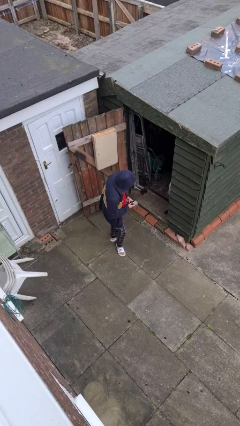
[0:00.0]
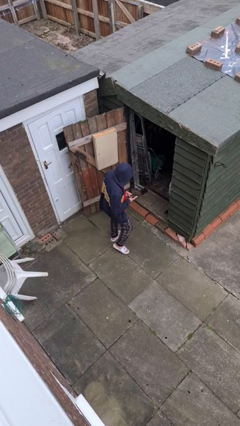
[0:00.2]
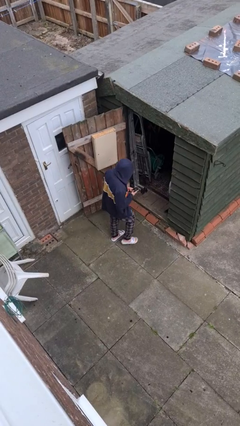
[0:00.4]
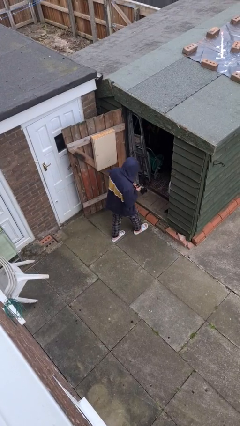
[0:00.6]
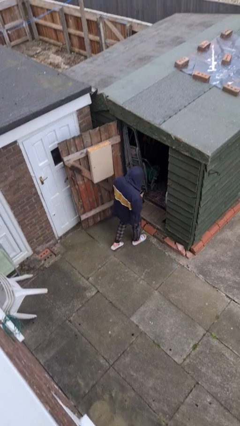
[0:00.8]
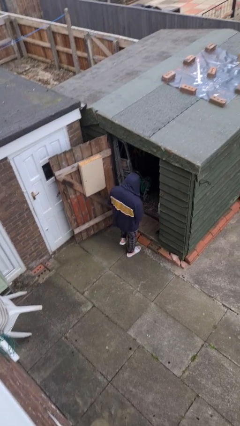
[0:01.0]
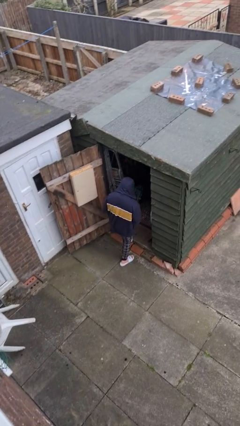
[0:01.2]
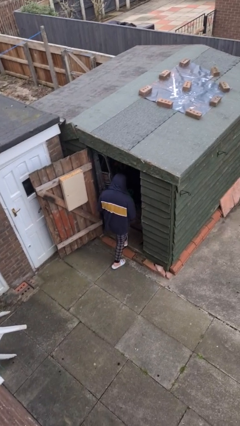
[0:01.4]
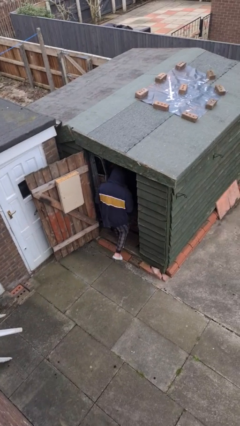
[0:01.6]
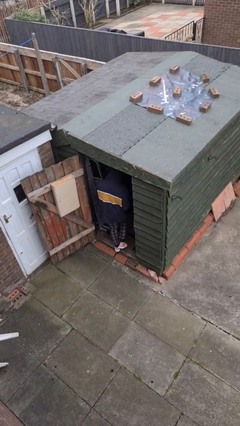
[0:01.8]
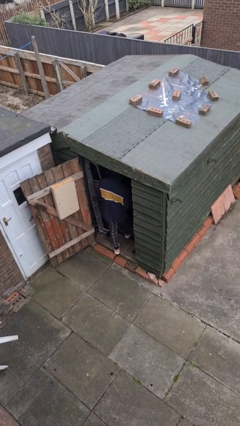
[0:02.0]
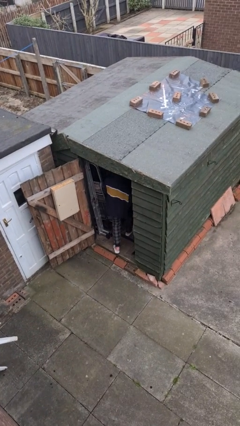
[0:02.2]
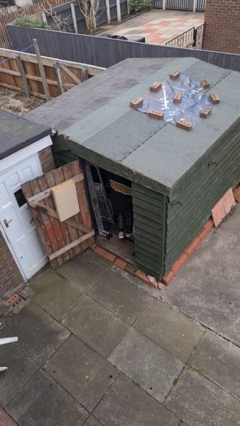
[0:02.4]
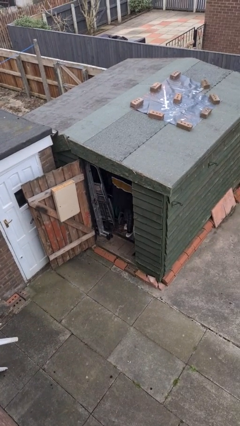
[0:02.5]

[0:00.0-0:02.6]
person exits scene through structure

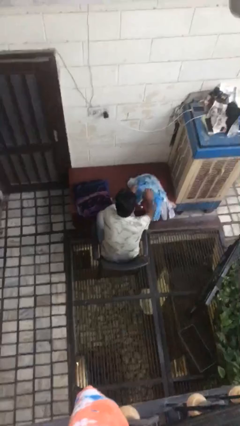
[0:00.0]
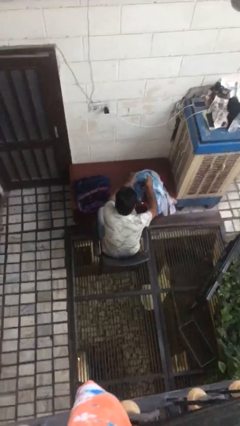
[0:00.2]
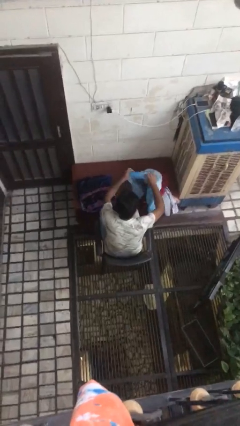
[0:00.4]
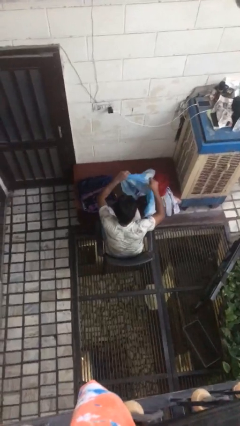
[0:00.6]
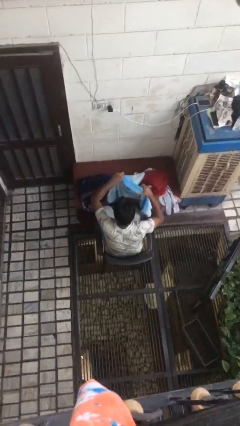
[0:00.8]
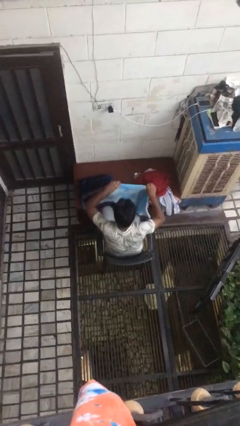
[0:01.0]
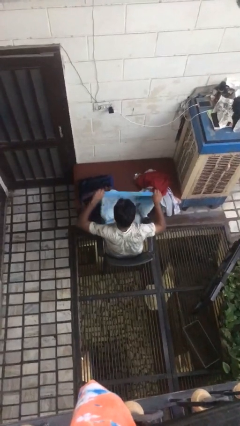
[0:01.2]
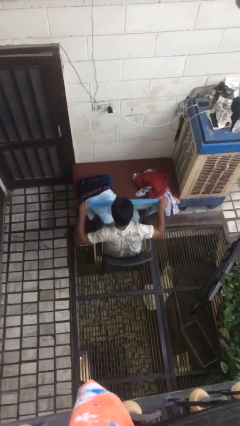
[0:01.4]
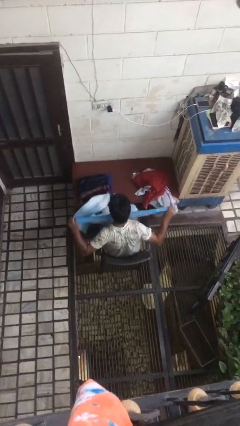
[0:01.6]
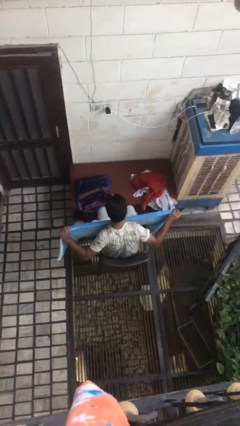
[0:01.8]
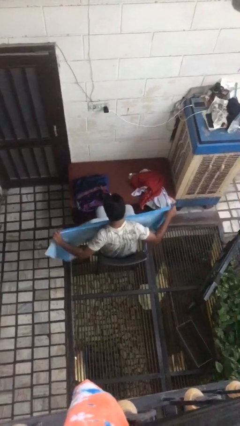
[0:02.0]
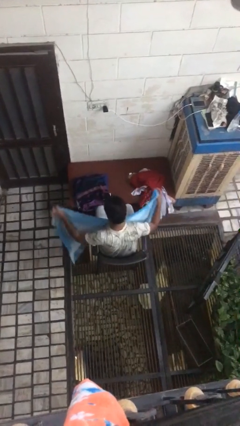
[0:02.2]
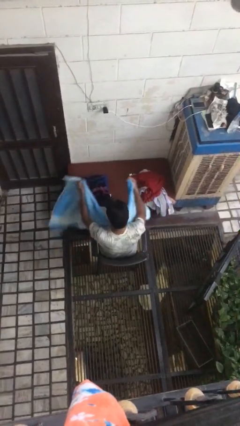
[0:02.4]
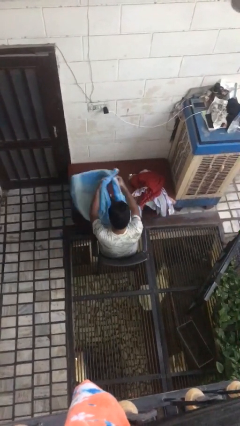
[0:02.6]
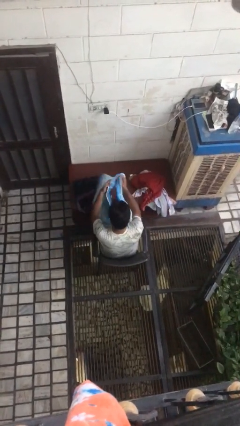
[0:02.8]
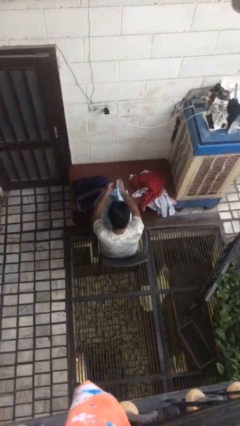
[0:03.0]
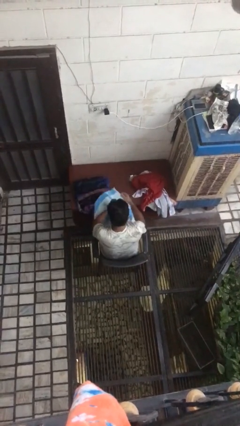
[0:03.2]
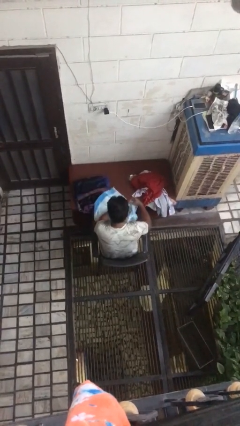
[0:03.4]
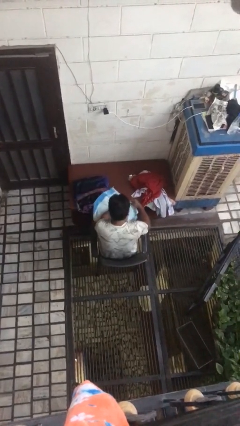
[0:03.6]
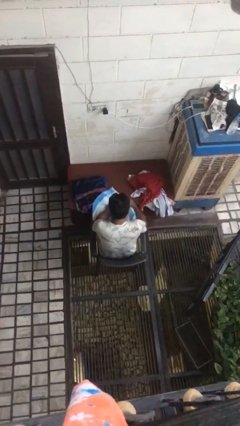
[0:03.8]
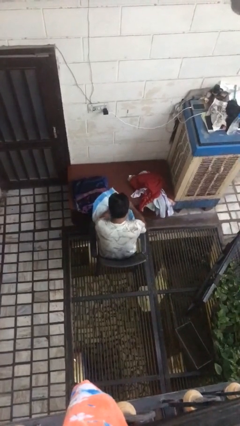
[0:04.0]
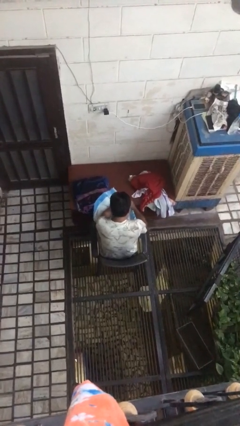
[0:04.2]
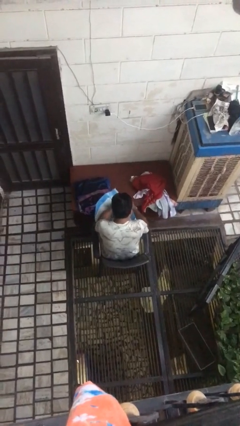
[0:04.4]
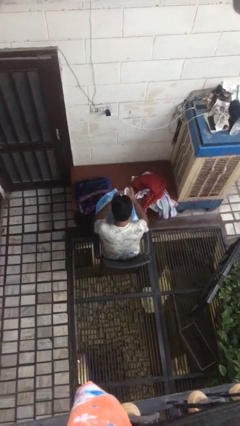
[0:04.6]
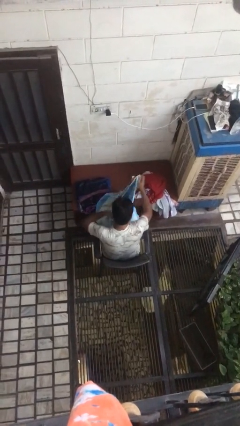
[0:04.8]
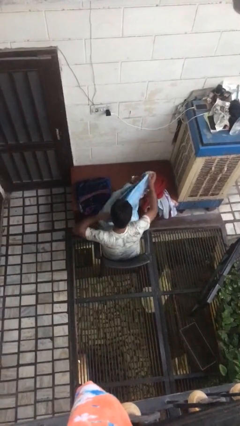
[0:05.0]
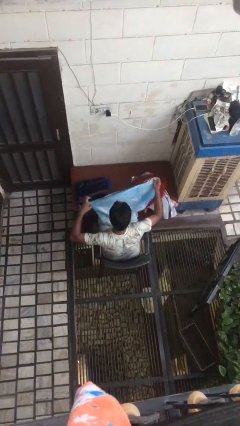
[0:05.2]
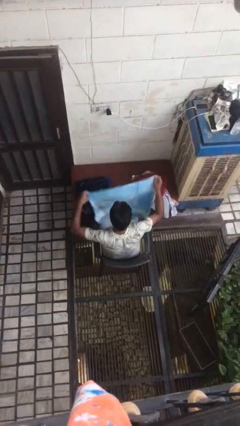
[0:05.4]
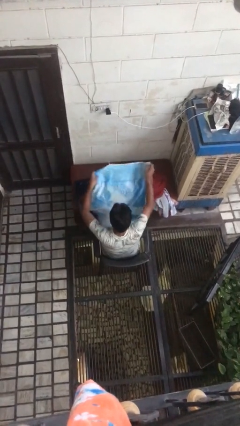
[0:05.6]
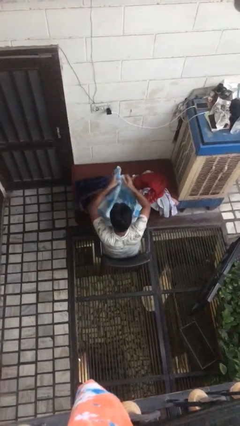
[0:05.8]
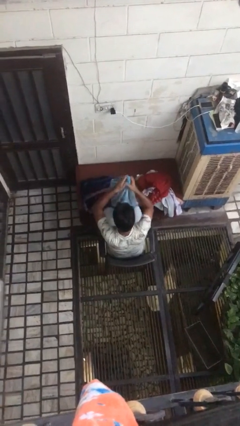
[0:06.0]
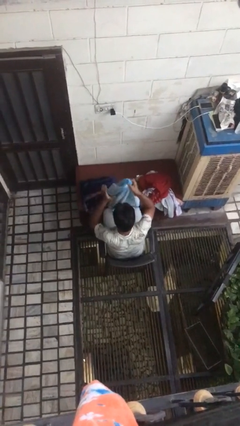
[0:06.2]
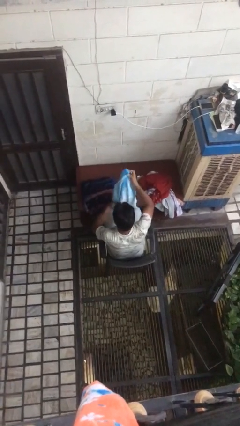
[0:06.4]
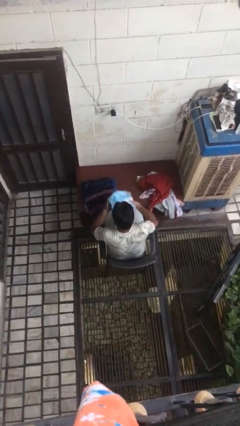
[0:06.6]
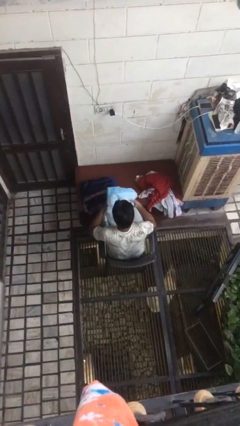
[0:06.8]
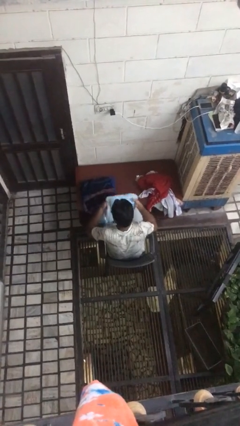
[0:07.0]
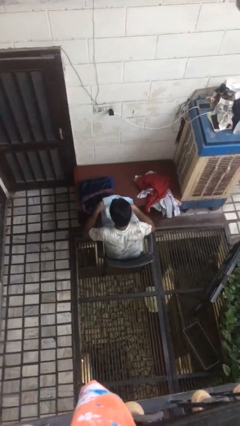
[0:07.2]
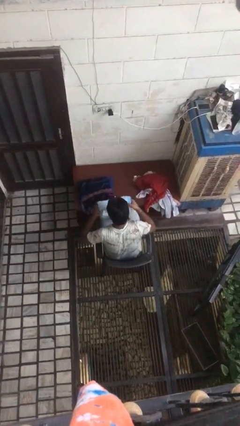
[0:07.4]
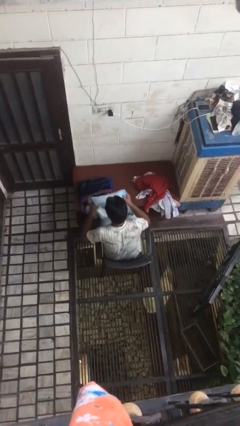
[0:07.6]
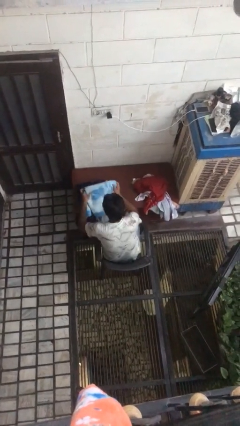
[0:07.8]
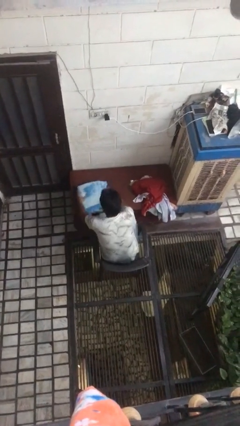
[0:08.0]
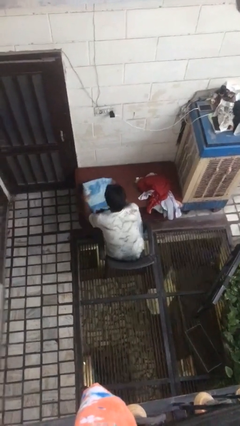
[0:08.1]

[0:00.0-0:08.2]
person folds towel

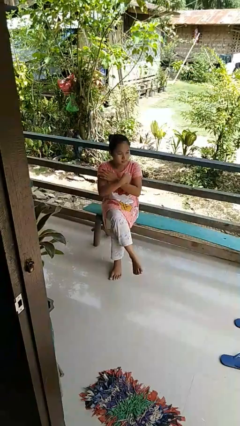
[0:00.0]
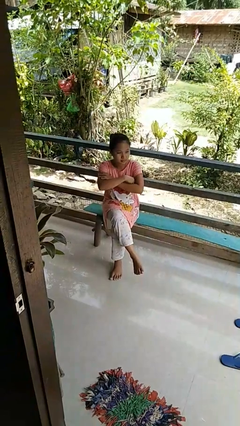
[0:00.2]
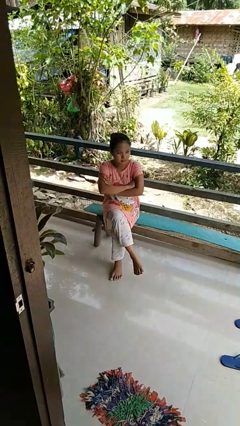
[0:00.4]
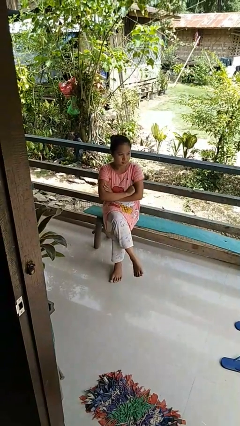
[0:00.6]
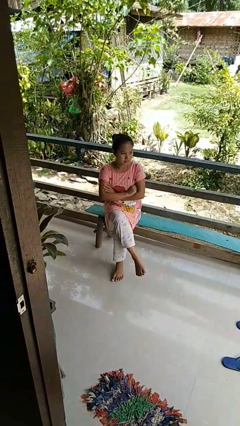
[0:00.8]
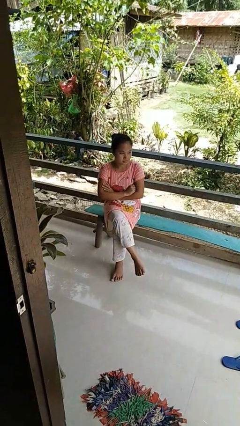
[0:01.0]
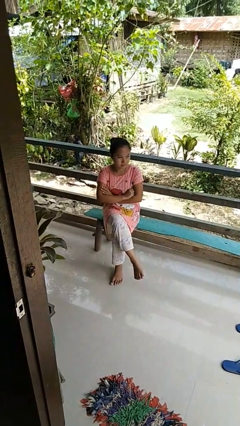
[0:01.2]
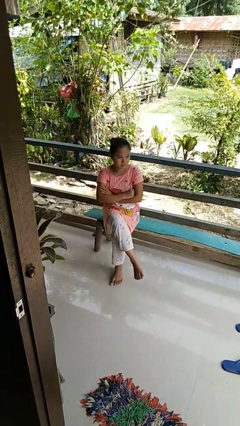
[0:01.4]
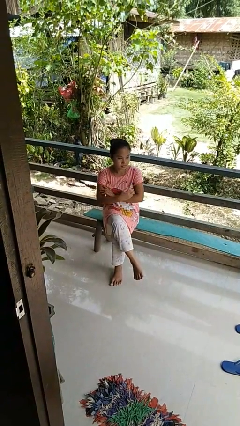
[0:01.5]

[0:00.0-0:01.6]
person crosses arms

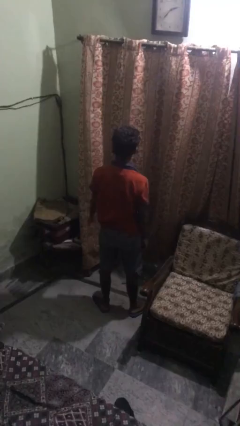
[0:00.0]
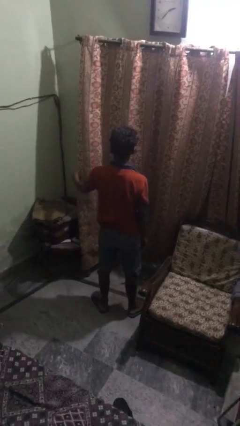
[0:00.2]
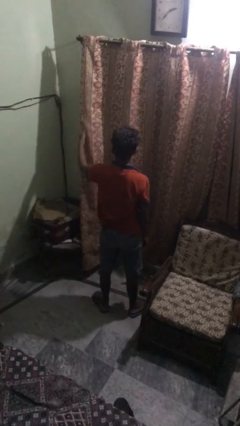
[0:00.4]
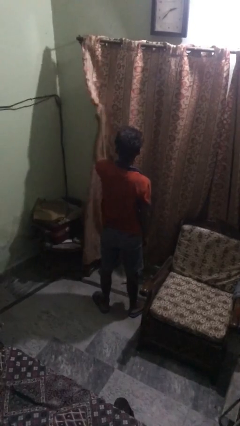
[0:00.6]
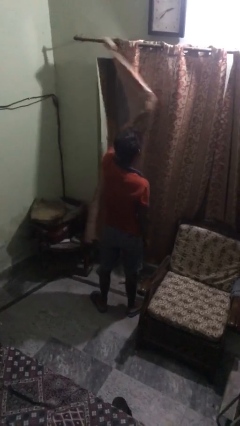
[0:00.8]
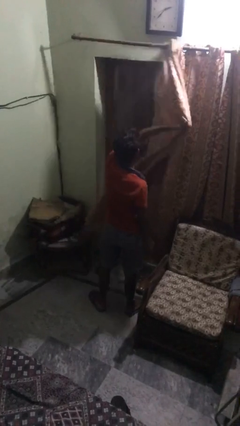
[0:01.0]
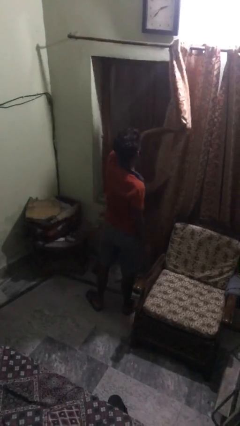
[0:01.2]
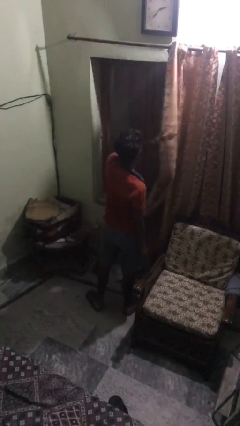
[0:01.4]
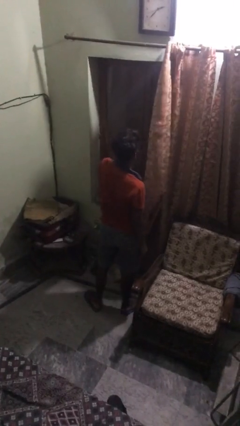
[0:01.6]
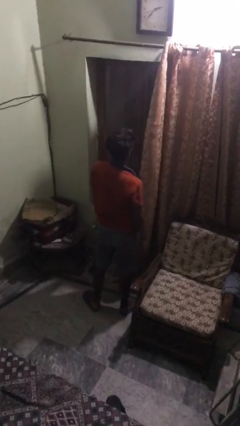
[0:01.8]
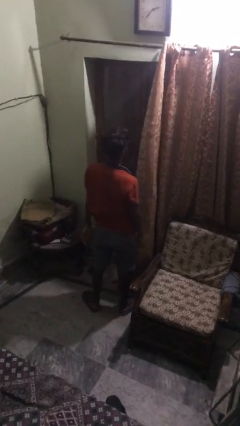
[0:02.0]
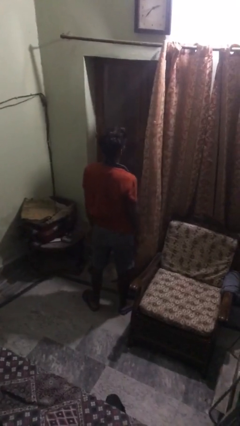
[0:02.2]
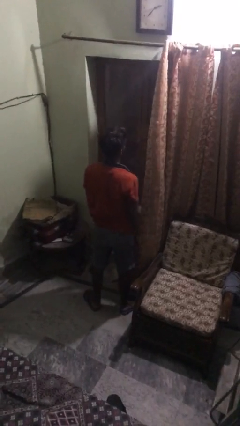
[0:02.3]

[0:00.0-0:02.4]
person opens curtains

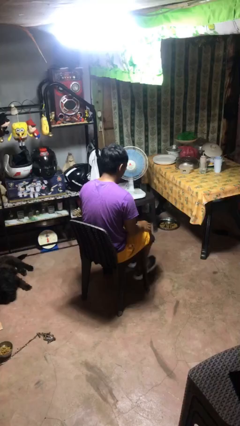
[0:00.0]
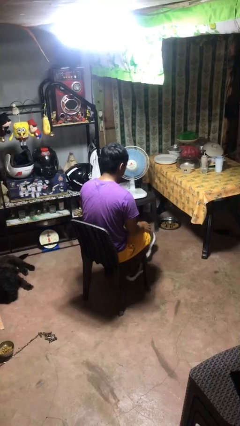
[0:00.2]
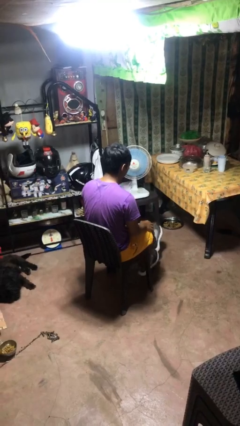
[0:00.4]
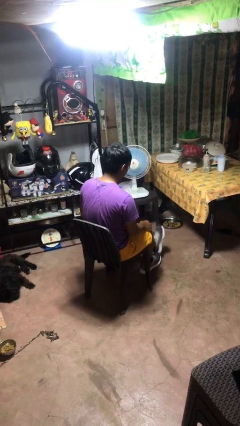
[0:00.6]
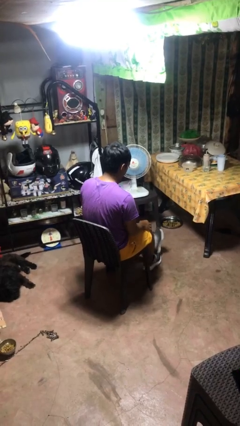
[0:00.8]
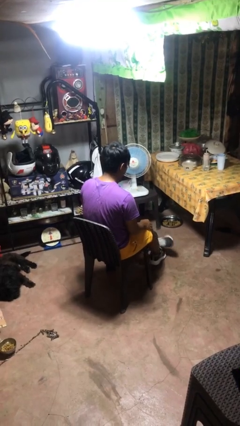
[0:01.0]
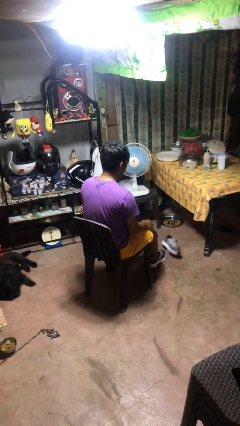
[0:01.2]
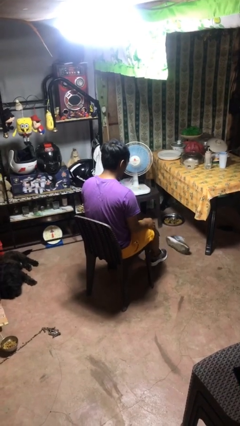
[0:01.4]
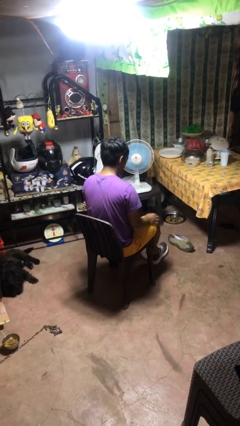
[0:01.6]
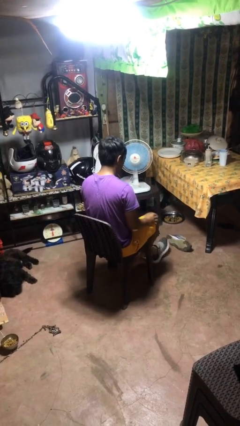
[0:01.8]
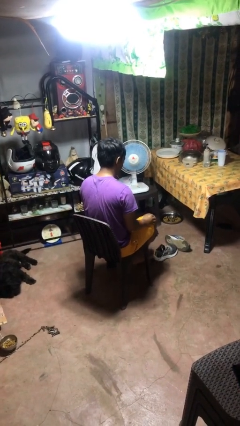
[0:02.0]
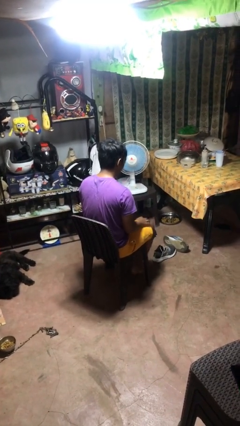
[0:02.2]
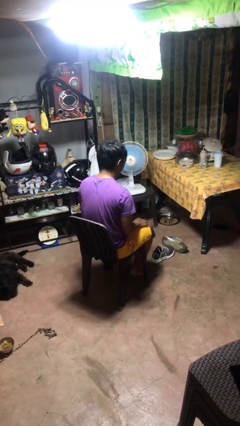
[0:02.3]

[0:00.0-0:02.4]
person takes off shoes
